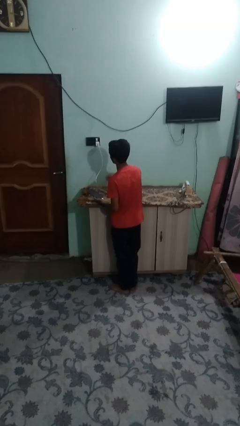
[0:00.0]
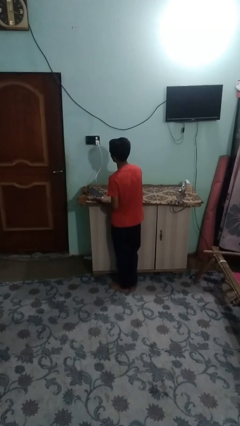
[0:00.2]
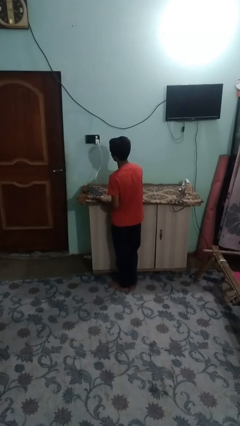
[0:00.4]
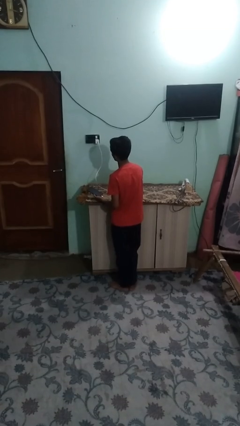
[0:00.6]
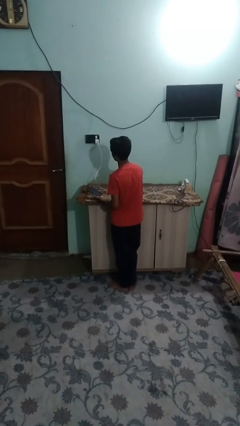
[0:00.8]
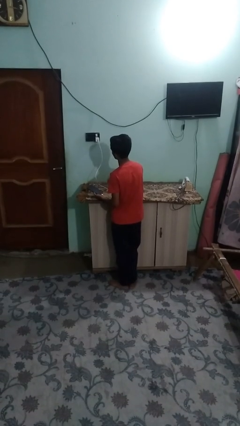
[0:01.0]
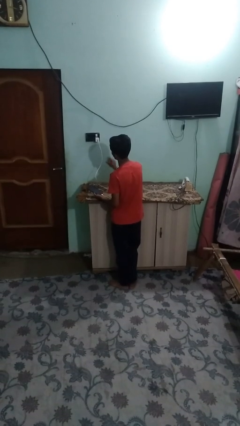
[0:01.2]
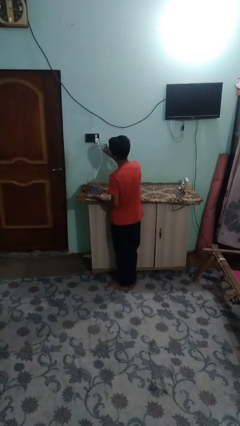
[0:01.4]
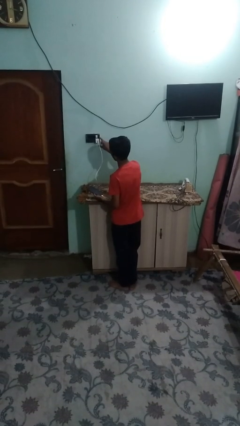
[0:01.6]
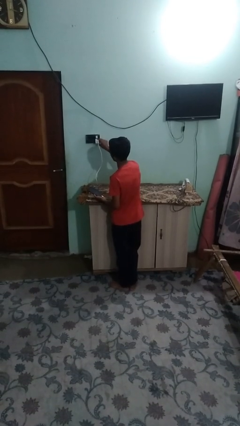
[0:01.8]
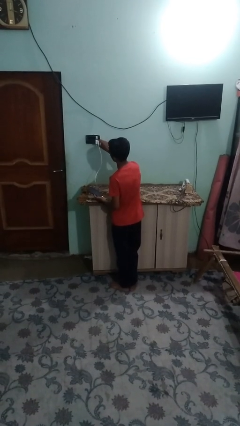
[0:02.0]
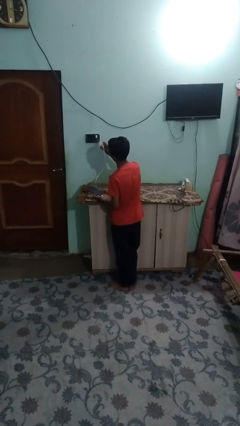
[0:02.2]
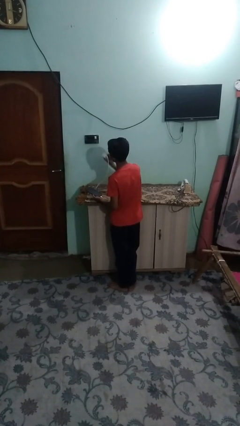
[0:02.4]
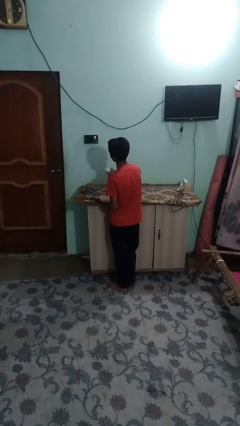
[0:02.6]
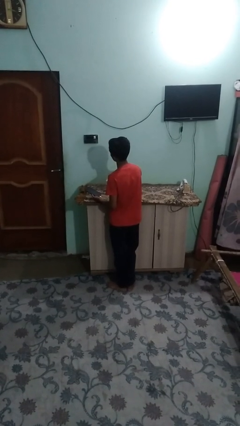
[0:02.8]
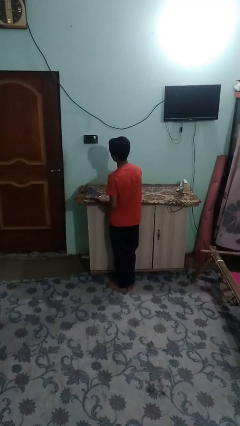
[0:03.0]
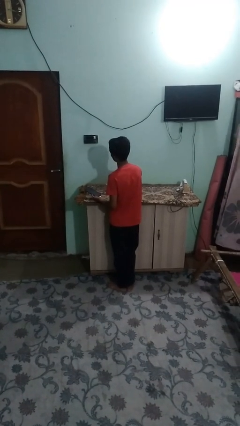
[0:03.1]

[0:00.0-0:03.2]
person unplugs from electrical socket

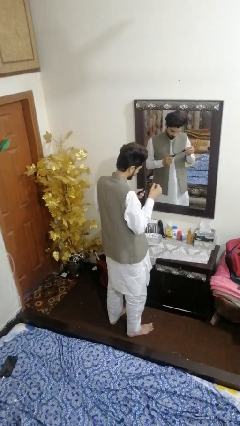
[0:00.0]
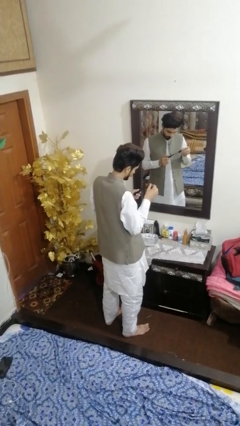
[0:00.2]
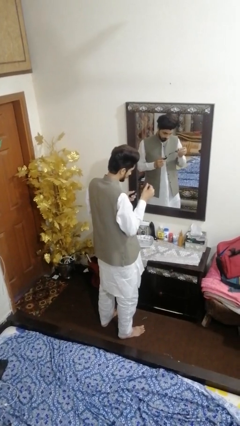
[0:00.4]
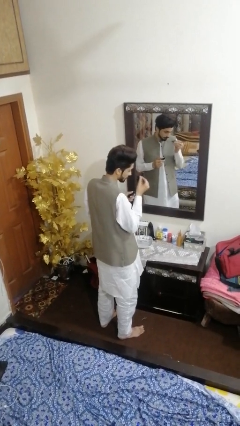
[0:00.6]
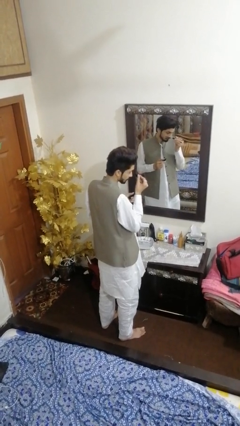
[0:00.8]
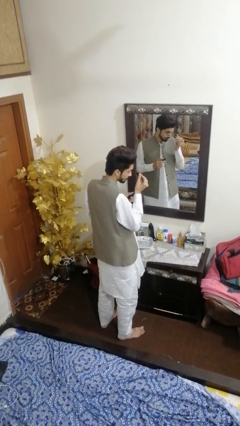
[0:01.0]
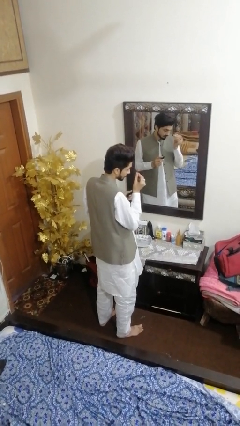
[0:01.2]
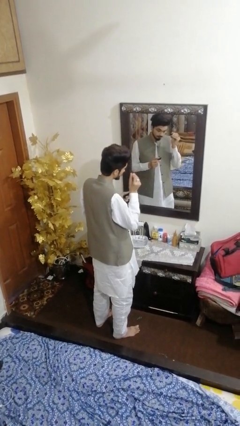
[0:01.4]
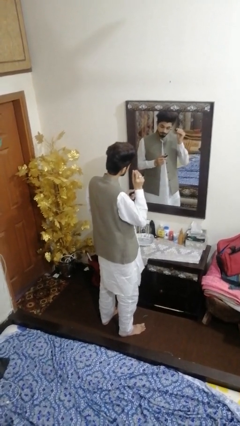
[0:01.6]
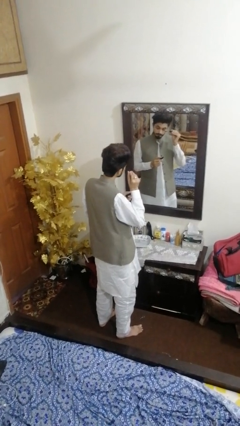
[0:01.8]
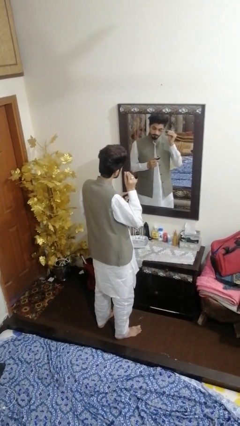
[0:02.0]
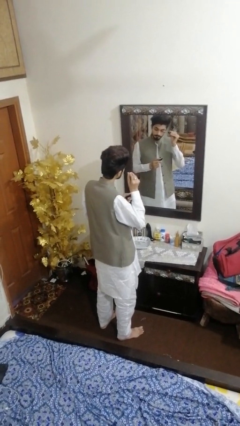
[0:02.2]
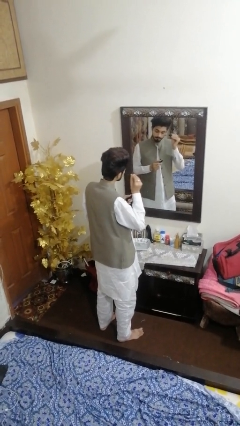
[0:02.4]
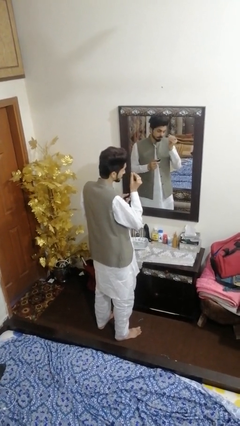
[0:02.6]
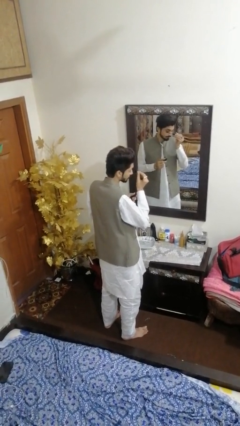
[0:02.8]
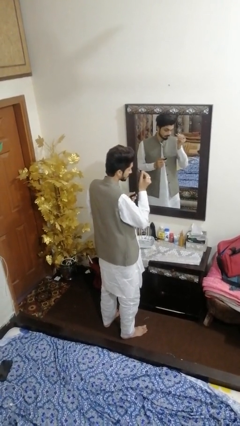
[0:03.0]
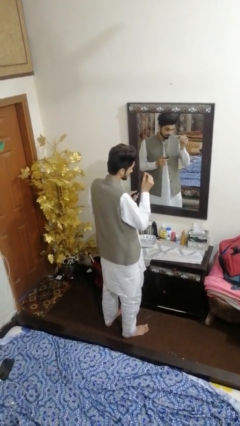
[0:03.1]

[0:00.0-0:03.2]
person applies eye makeup

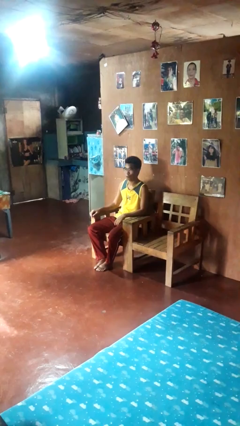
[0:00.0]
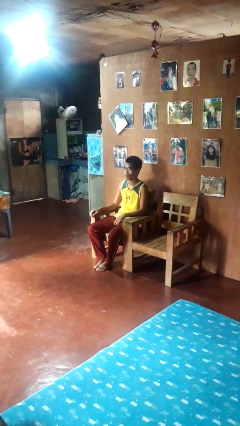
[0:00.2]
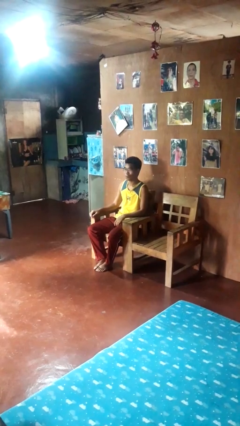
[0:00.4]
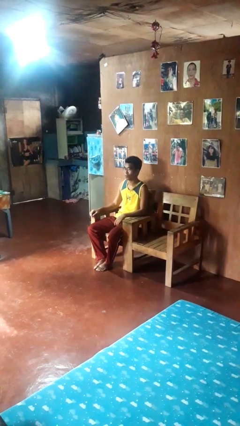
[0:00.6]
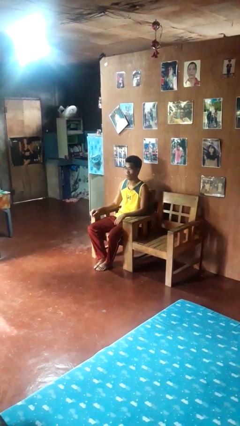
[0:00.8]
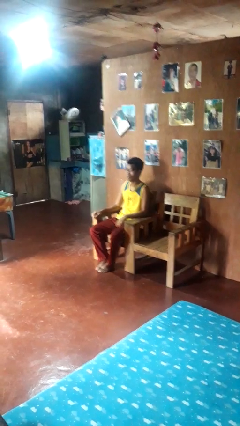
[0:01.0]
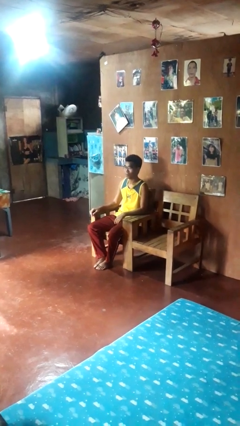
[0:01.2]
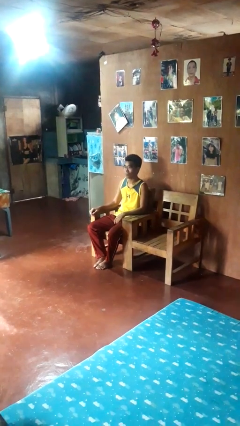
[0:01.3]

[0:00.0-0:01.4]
person shakes head

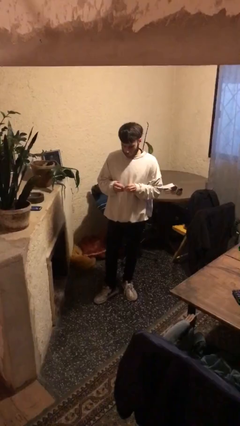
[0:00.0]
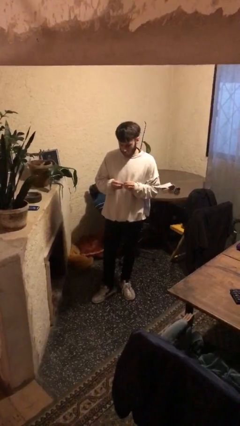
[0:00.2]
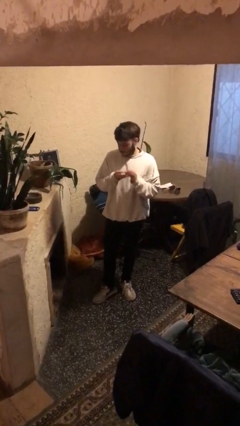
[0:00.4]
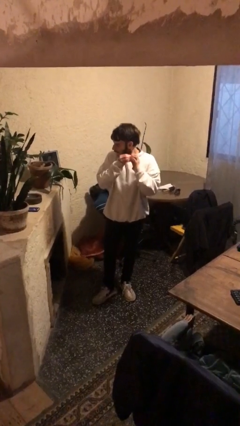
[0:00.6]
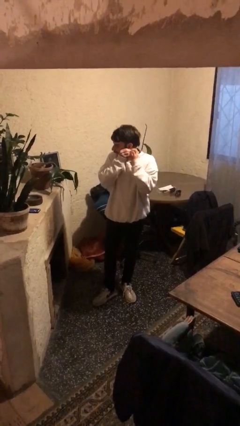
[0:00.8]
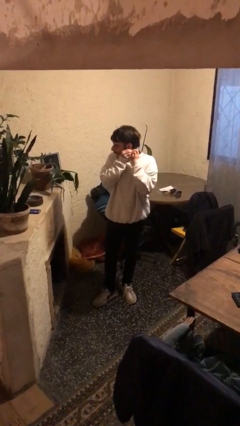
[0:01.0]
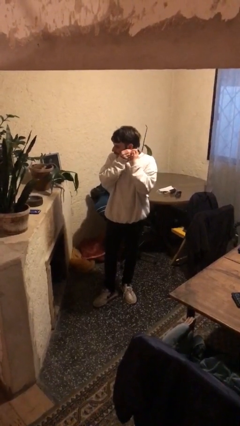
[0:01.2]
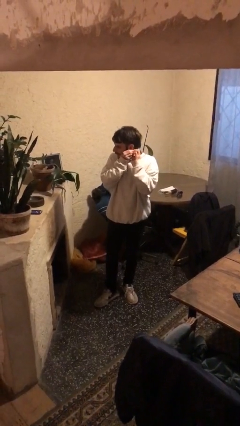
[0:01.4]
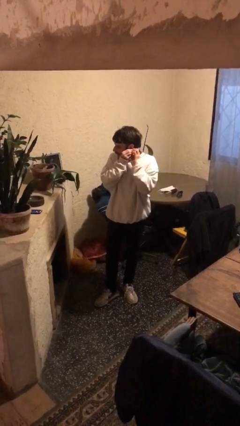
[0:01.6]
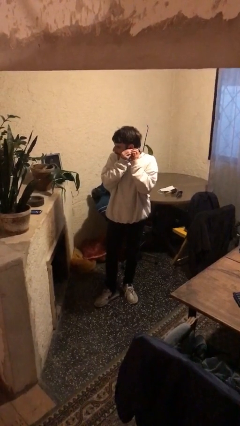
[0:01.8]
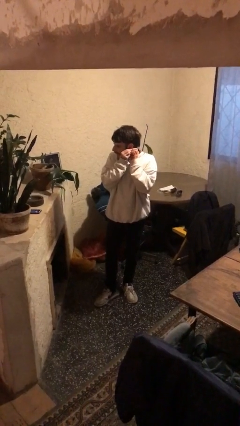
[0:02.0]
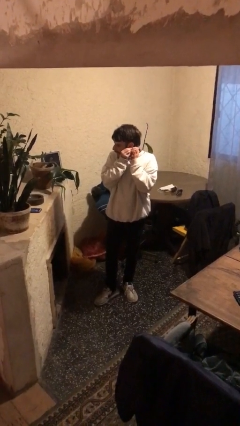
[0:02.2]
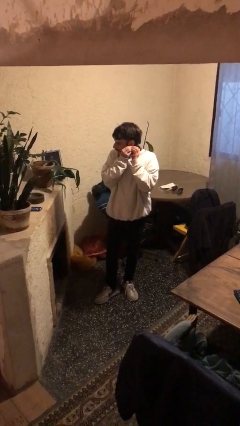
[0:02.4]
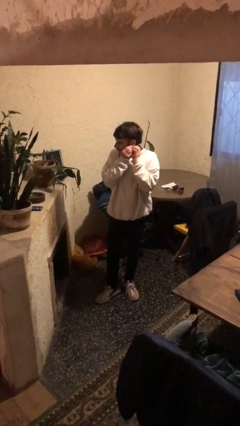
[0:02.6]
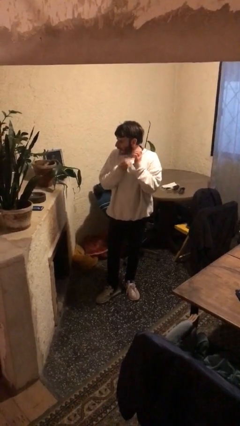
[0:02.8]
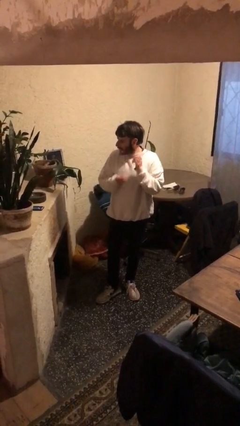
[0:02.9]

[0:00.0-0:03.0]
person puts on earrings

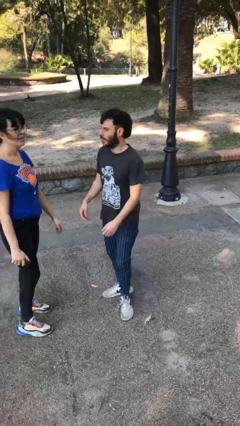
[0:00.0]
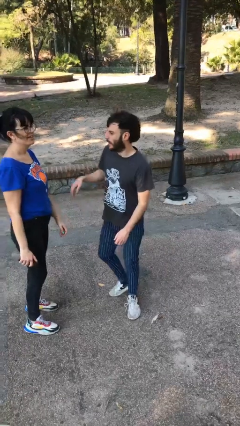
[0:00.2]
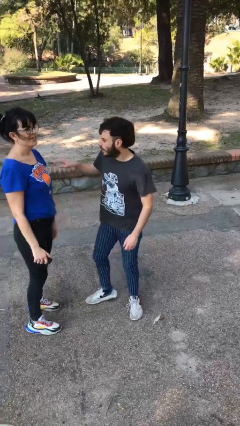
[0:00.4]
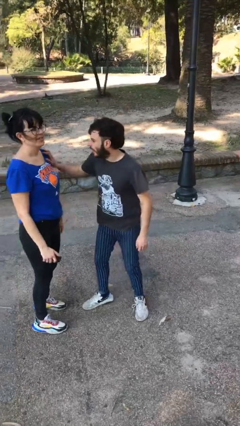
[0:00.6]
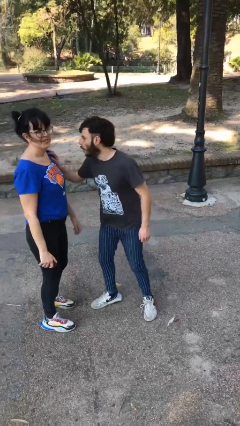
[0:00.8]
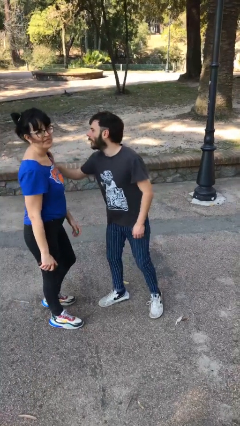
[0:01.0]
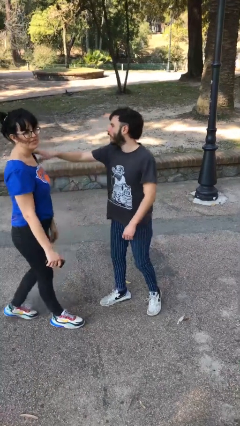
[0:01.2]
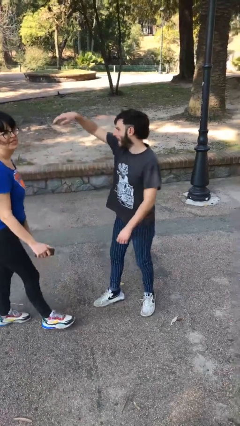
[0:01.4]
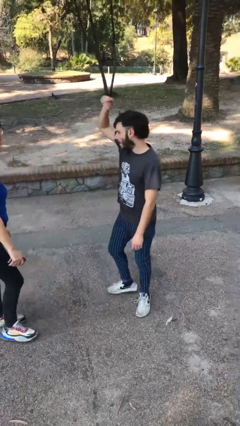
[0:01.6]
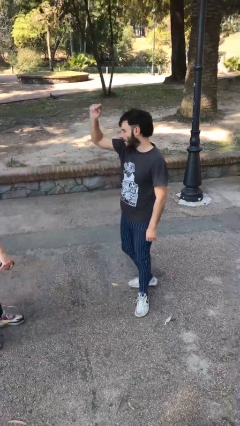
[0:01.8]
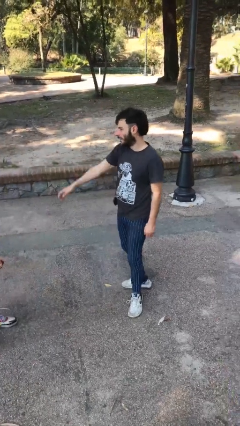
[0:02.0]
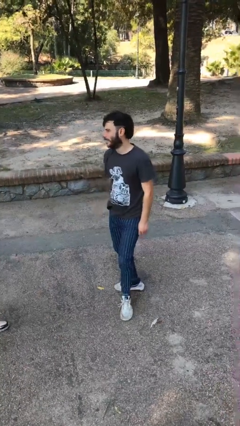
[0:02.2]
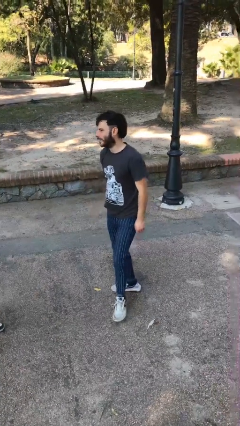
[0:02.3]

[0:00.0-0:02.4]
person shoves person

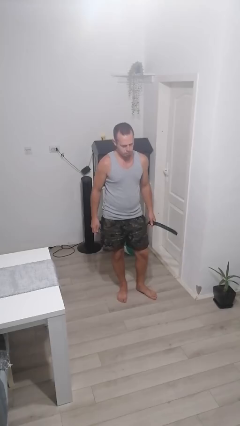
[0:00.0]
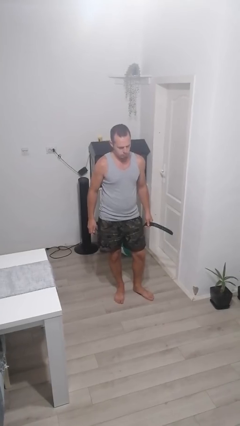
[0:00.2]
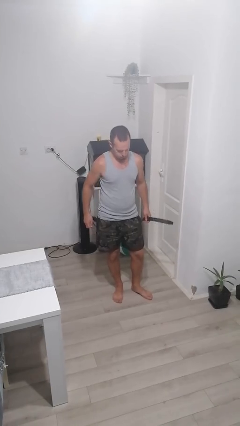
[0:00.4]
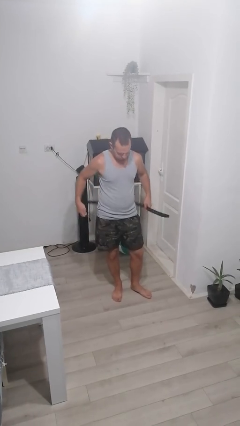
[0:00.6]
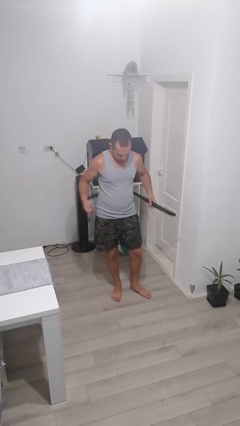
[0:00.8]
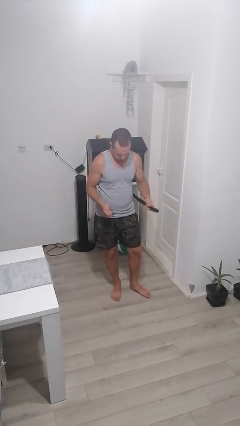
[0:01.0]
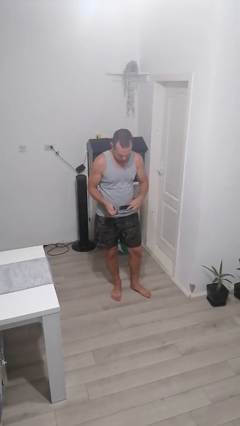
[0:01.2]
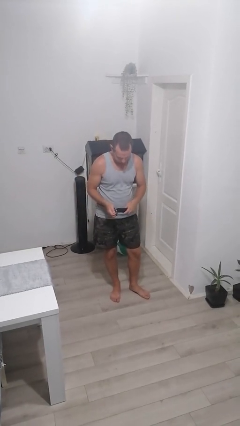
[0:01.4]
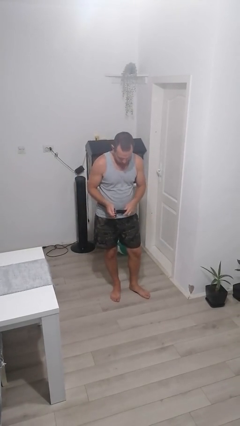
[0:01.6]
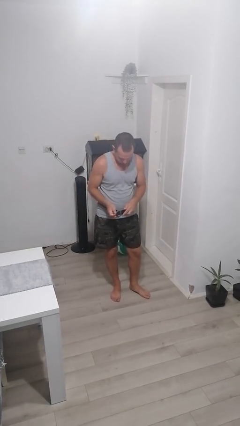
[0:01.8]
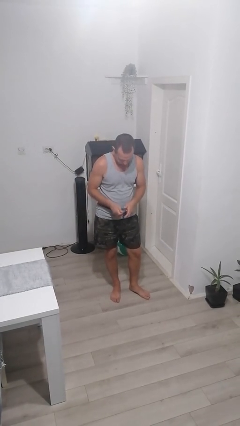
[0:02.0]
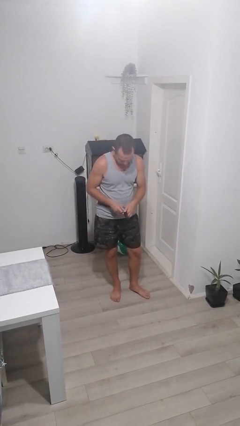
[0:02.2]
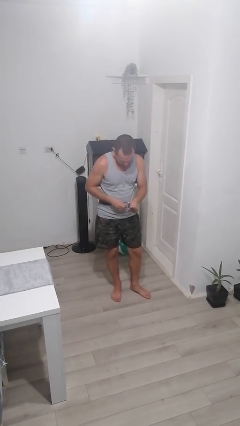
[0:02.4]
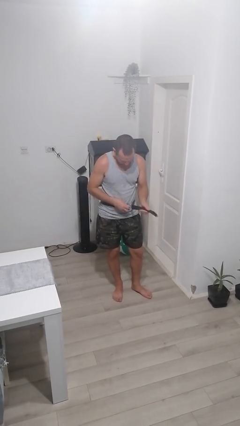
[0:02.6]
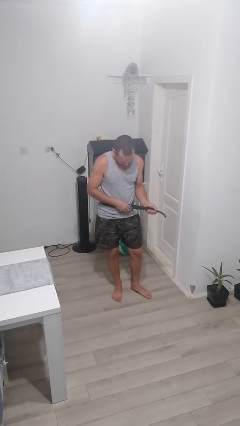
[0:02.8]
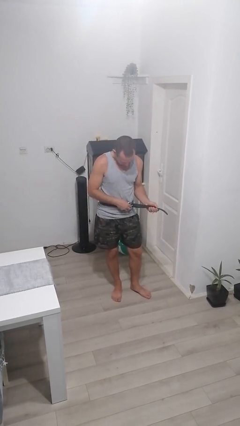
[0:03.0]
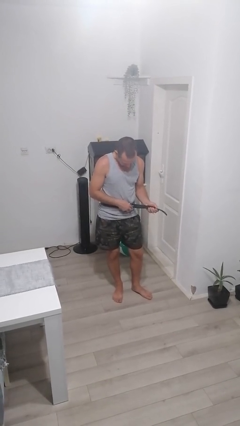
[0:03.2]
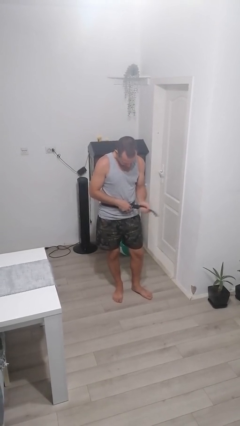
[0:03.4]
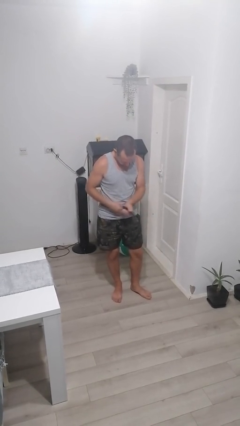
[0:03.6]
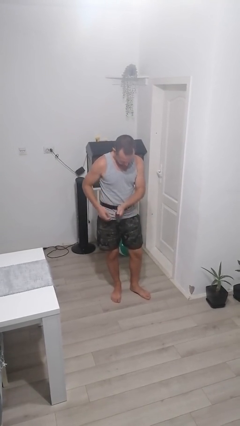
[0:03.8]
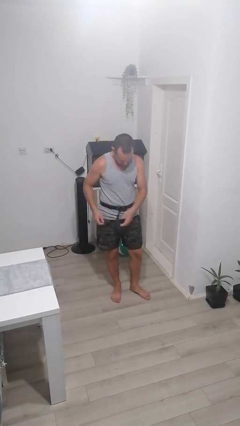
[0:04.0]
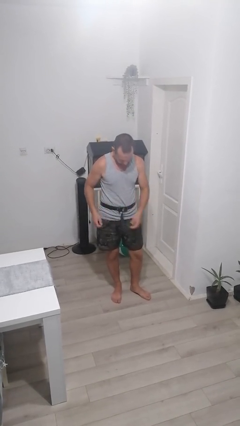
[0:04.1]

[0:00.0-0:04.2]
person puts on belt
